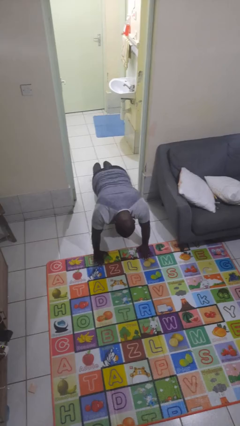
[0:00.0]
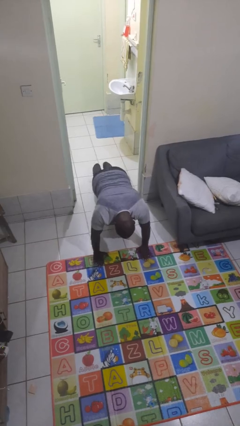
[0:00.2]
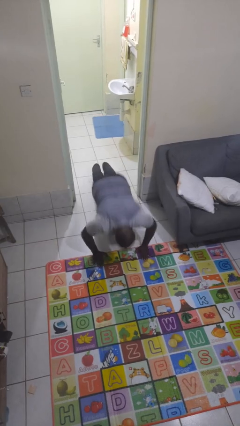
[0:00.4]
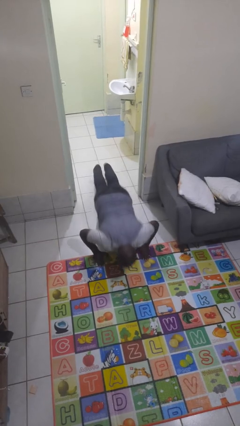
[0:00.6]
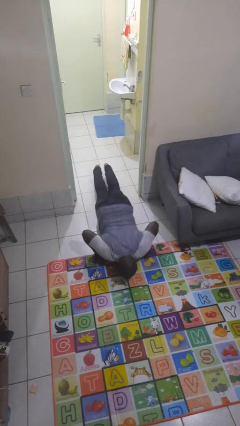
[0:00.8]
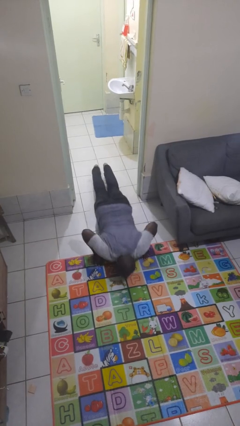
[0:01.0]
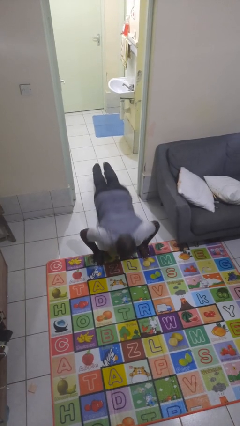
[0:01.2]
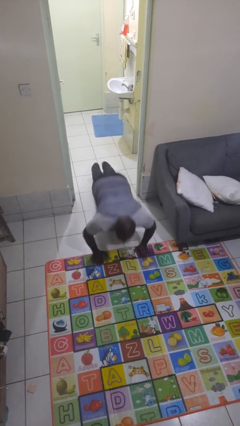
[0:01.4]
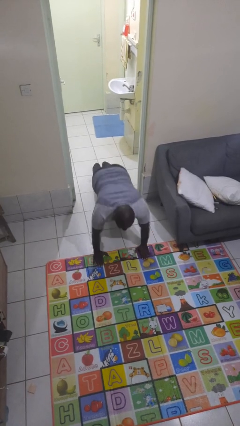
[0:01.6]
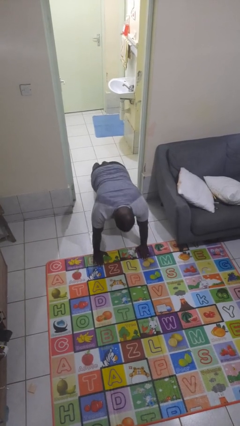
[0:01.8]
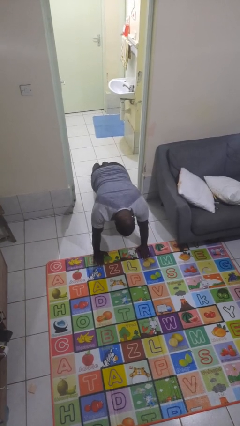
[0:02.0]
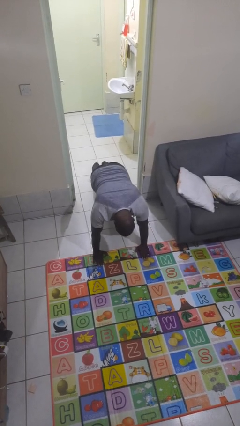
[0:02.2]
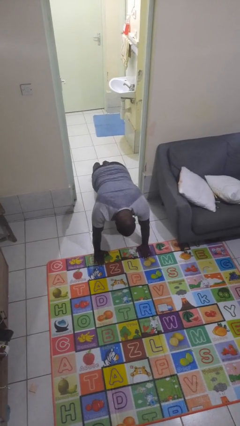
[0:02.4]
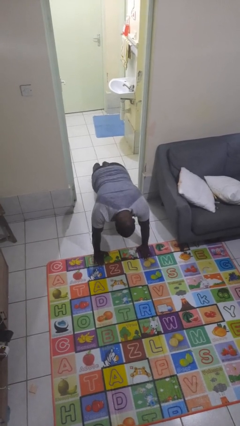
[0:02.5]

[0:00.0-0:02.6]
person exercises with pushup

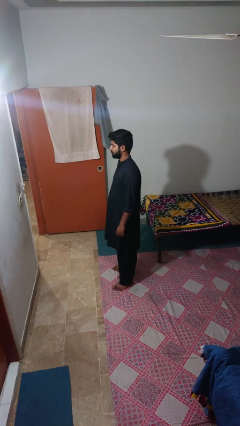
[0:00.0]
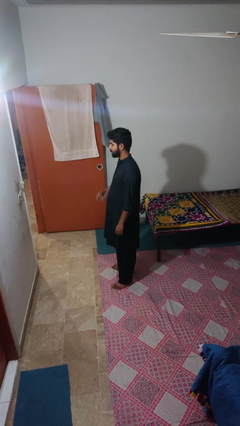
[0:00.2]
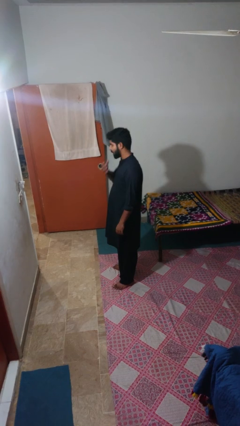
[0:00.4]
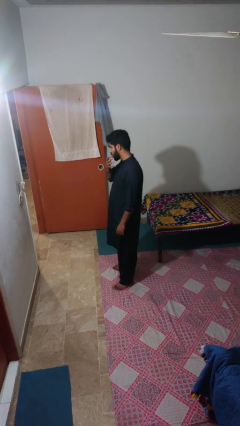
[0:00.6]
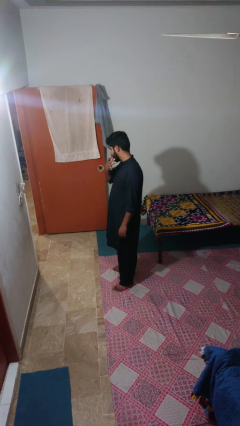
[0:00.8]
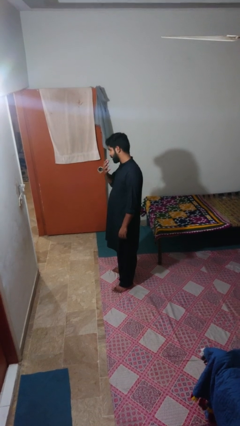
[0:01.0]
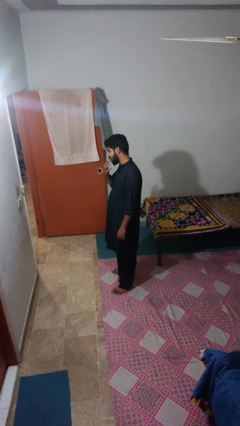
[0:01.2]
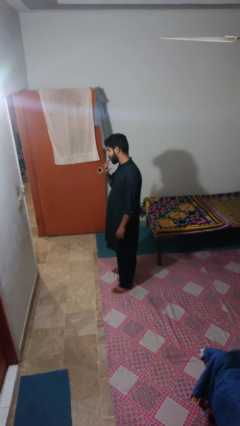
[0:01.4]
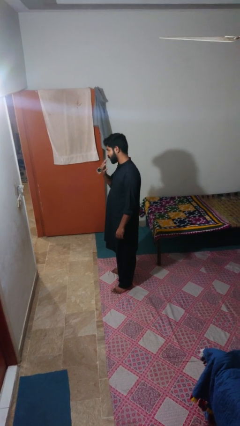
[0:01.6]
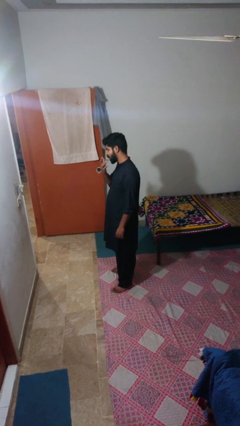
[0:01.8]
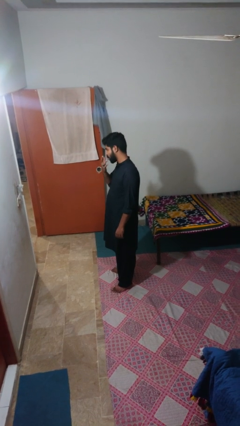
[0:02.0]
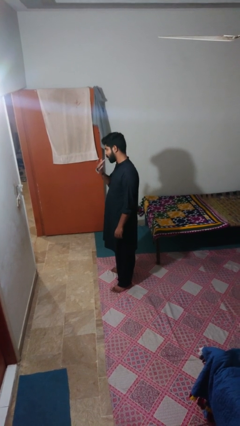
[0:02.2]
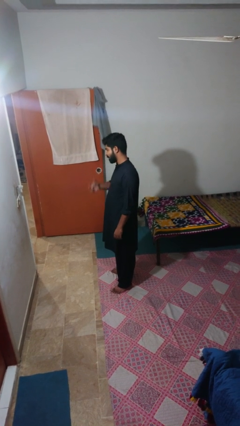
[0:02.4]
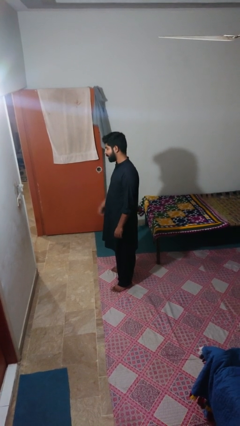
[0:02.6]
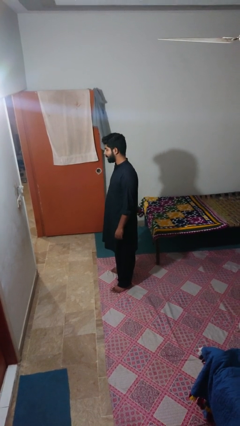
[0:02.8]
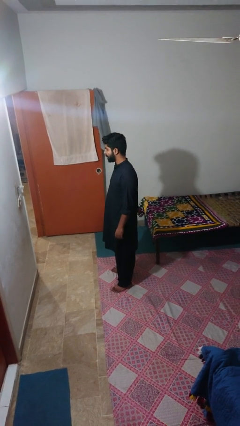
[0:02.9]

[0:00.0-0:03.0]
person licks fingers

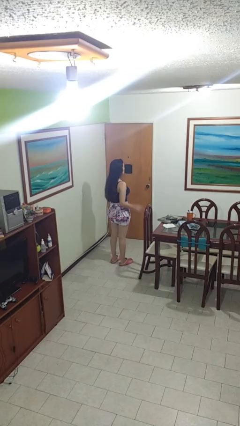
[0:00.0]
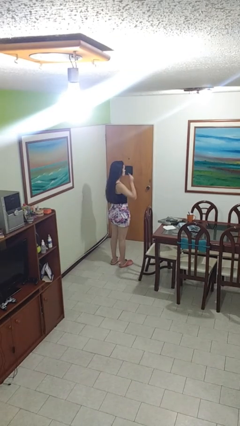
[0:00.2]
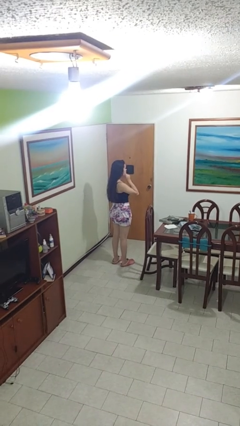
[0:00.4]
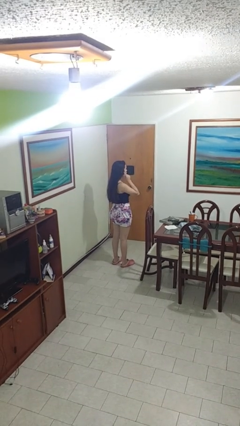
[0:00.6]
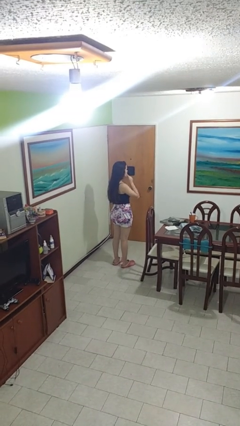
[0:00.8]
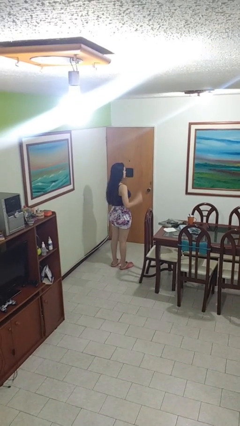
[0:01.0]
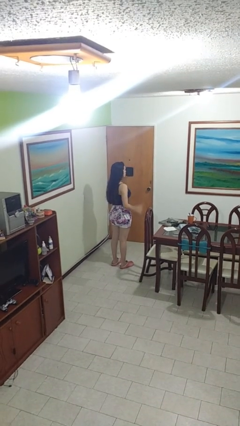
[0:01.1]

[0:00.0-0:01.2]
person gestures listen closely

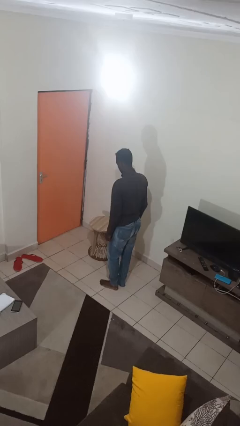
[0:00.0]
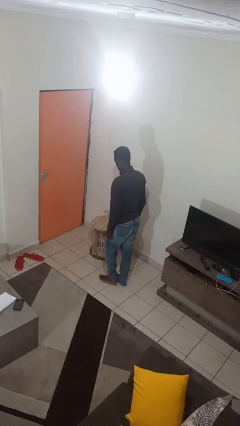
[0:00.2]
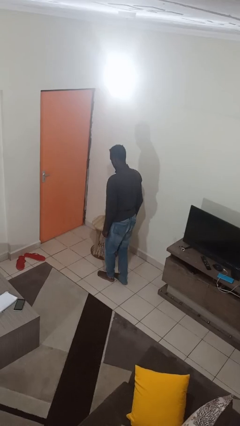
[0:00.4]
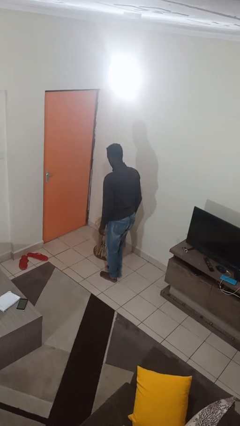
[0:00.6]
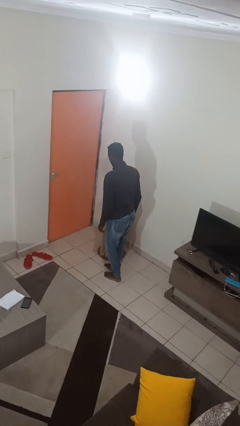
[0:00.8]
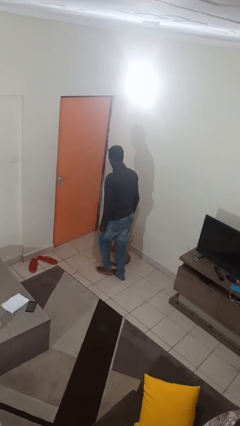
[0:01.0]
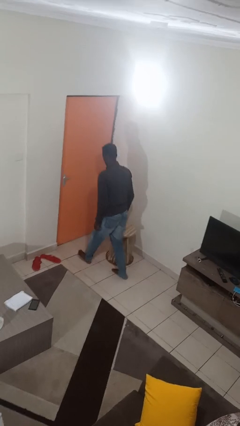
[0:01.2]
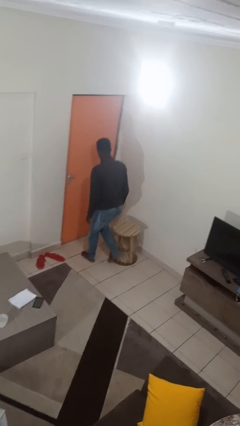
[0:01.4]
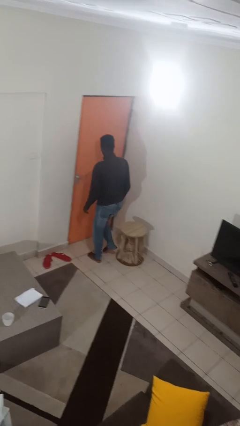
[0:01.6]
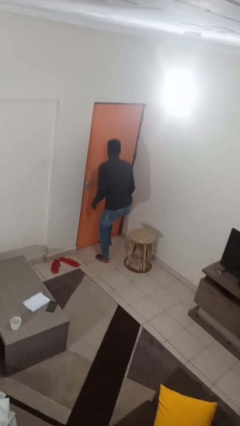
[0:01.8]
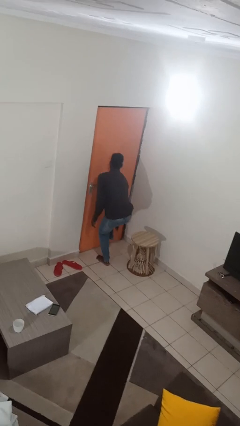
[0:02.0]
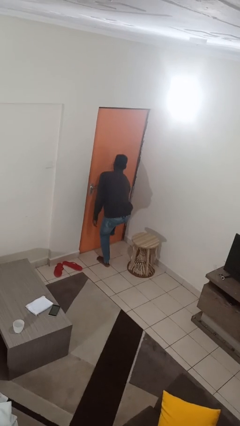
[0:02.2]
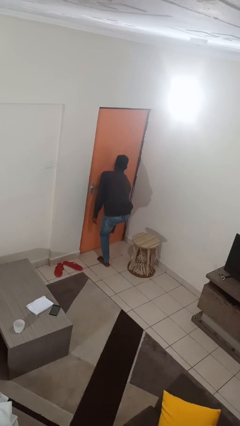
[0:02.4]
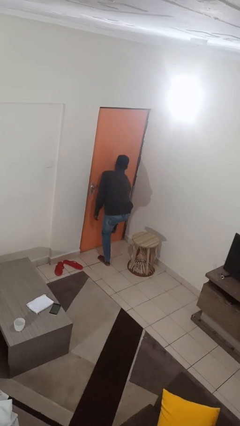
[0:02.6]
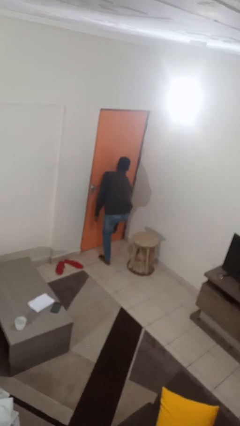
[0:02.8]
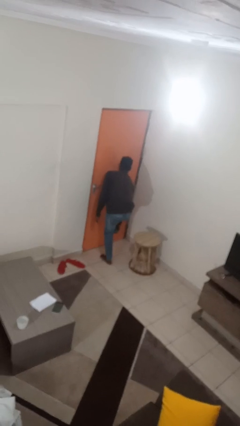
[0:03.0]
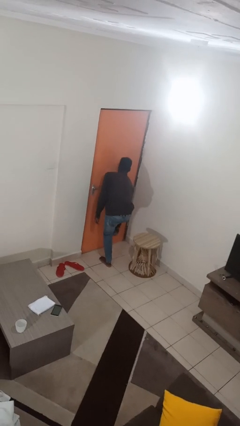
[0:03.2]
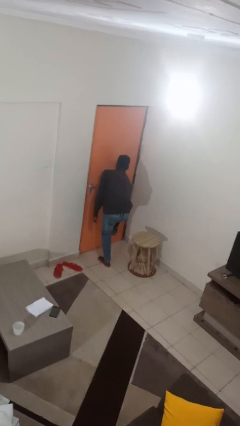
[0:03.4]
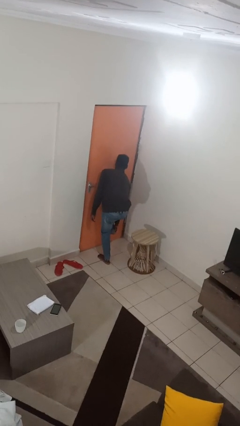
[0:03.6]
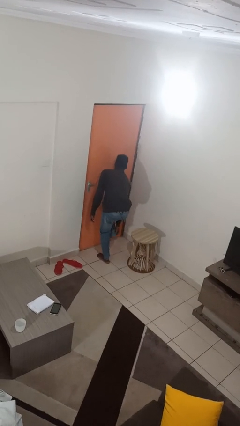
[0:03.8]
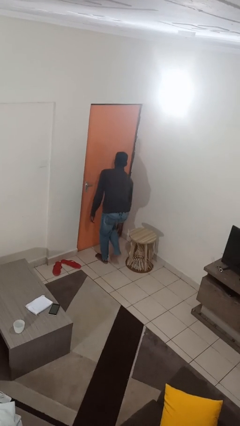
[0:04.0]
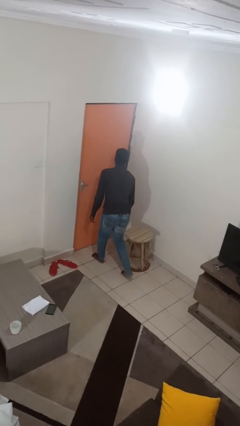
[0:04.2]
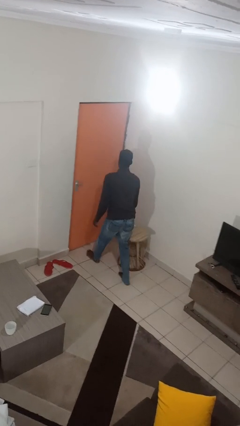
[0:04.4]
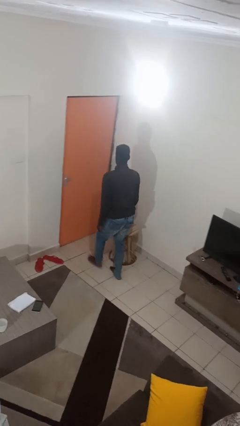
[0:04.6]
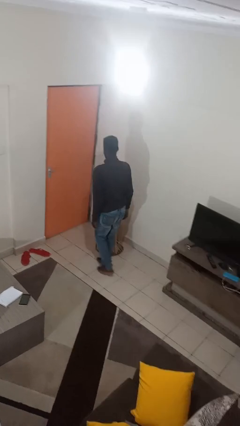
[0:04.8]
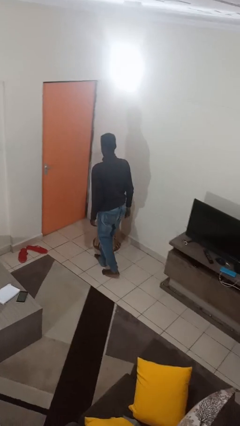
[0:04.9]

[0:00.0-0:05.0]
person stubs toe

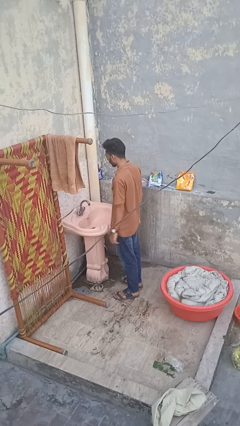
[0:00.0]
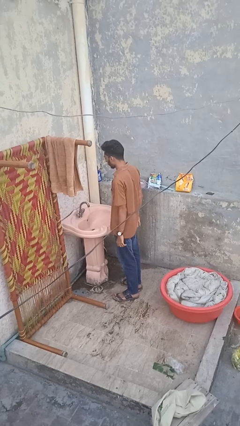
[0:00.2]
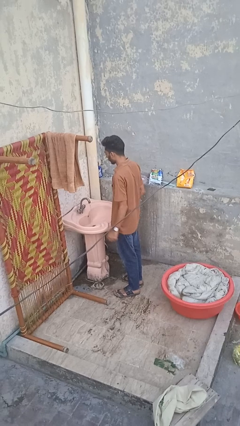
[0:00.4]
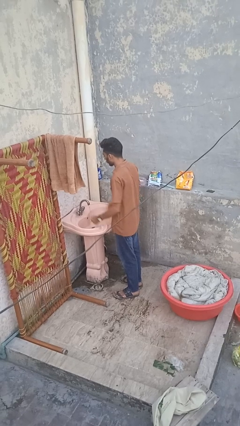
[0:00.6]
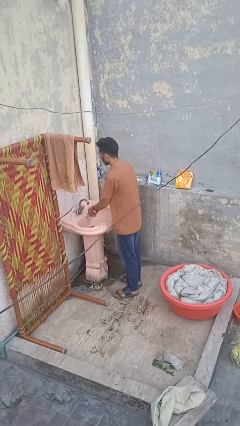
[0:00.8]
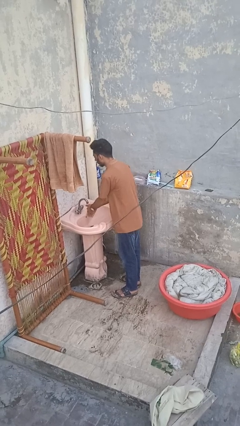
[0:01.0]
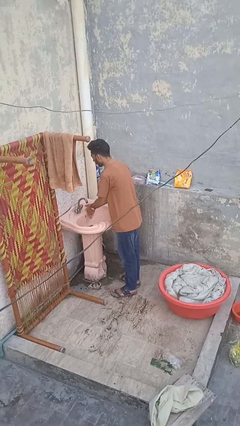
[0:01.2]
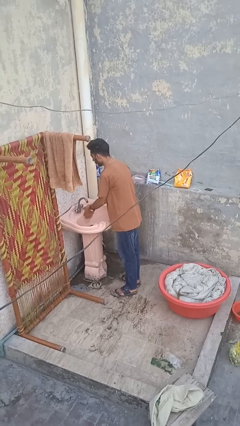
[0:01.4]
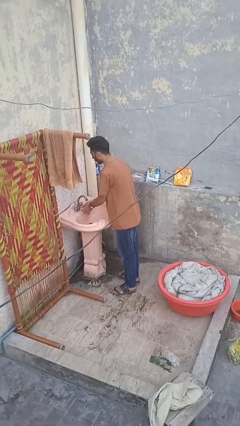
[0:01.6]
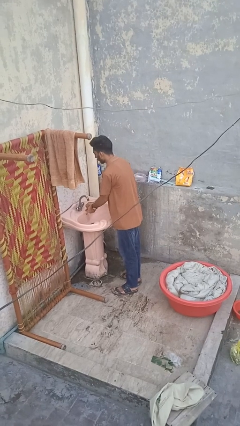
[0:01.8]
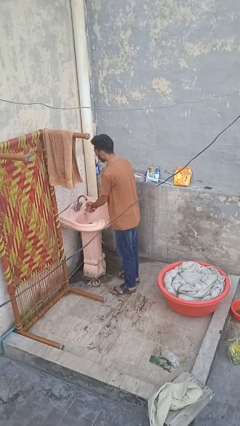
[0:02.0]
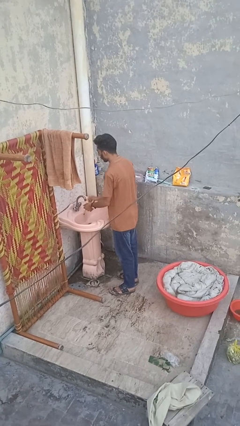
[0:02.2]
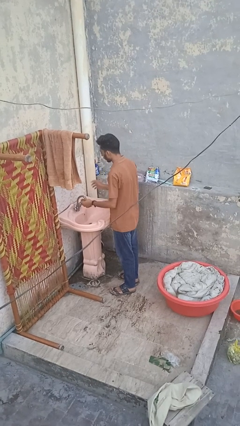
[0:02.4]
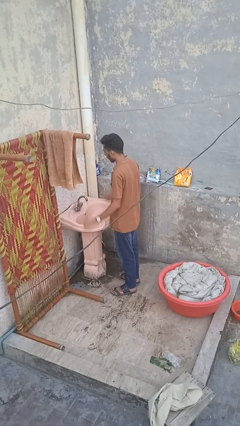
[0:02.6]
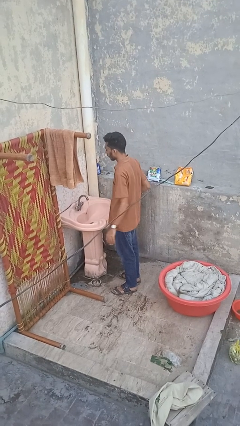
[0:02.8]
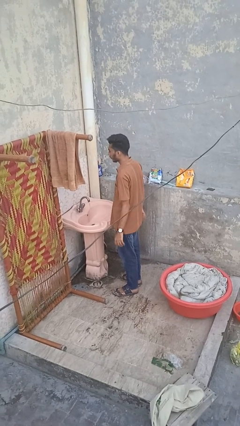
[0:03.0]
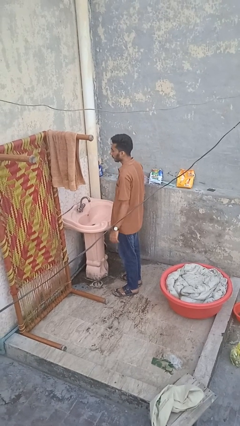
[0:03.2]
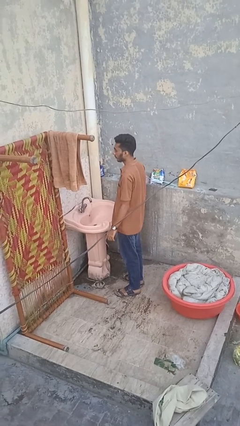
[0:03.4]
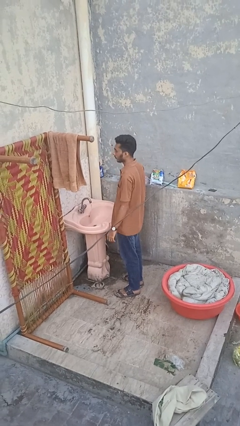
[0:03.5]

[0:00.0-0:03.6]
person washes hands

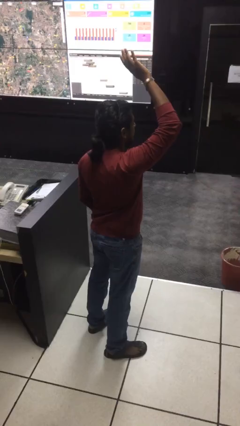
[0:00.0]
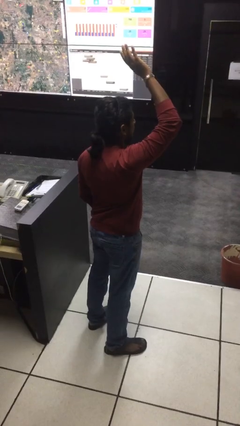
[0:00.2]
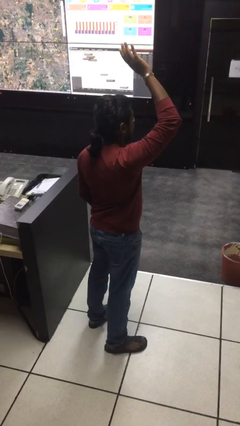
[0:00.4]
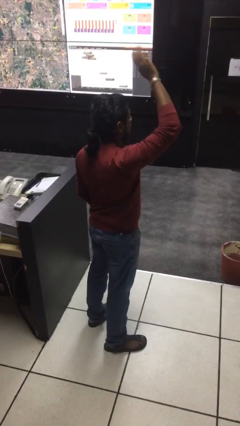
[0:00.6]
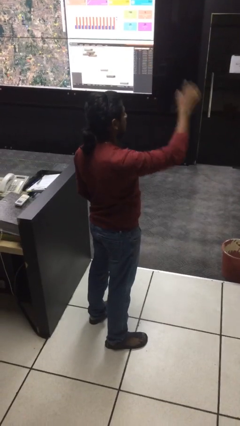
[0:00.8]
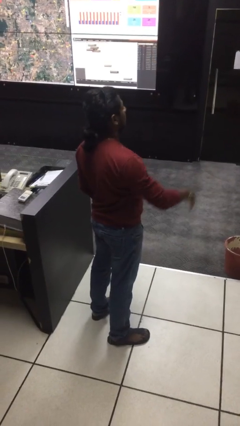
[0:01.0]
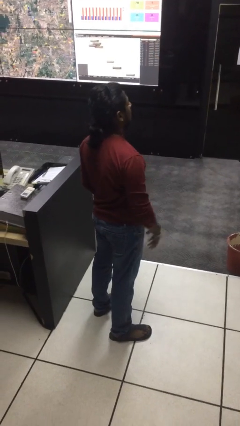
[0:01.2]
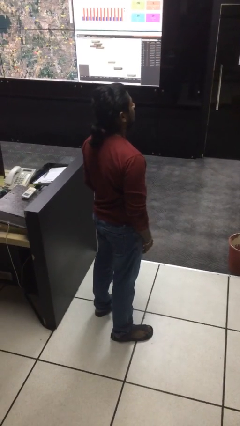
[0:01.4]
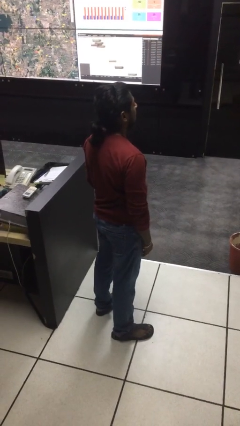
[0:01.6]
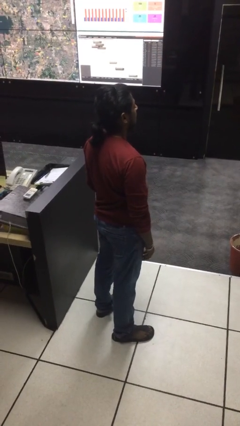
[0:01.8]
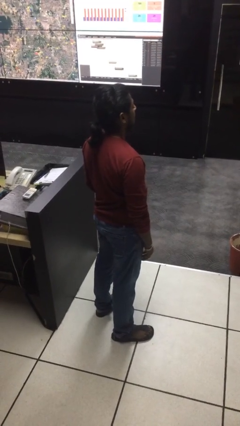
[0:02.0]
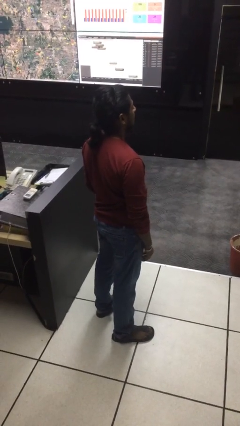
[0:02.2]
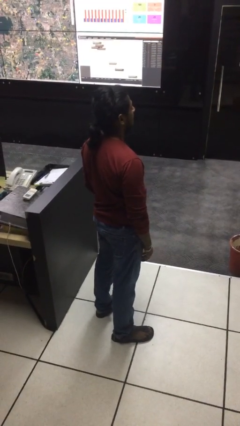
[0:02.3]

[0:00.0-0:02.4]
person gestures lower hand
